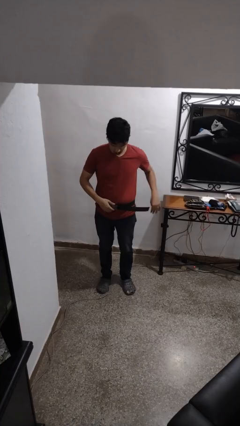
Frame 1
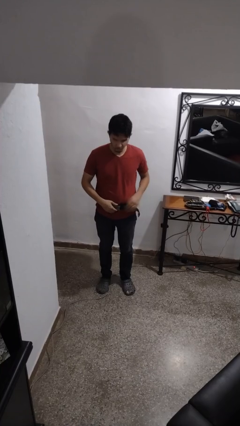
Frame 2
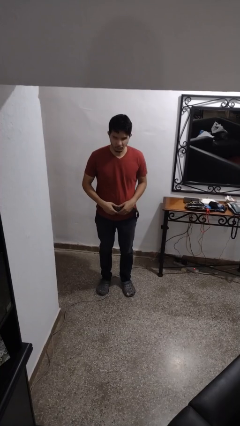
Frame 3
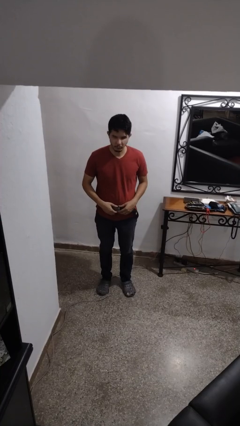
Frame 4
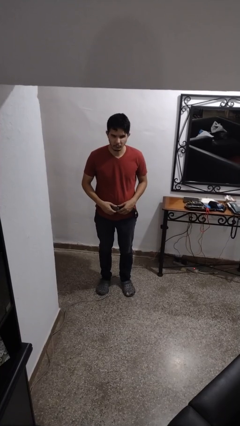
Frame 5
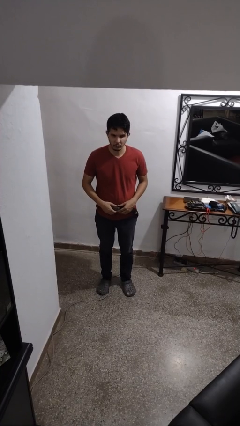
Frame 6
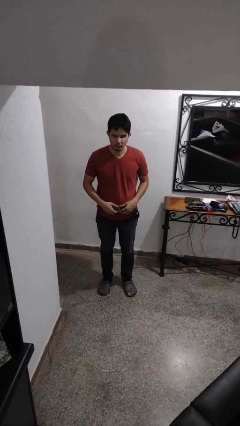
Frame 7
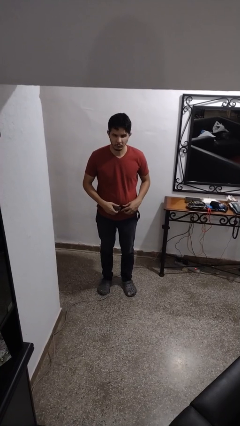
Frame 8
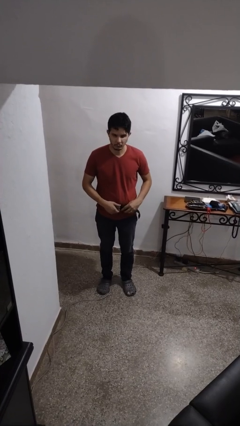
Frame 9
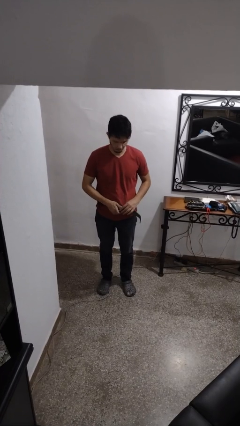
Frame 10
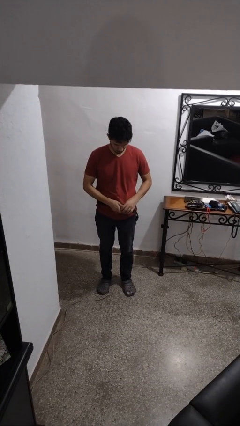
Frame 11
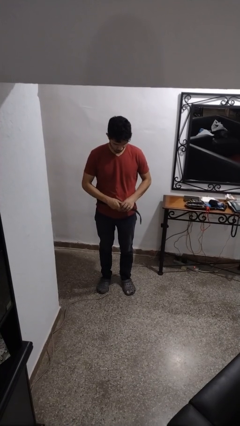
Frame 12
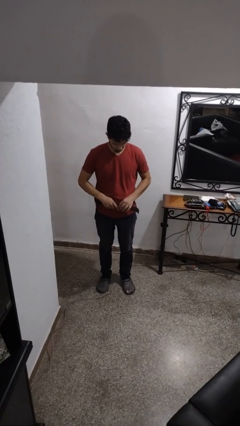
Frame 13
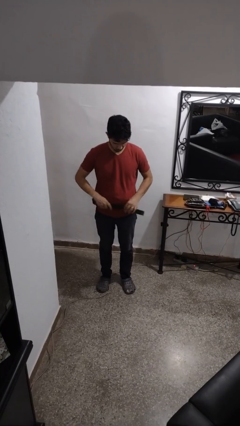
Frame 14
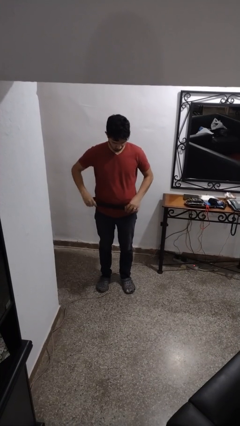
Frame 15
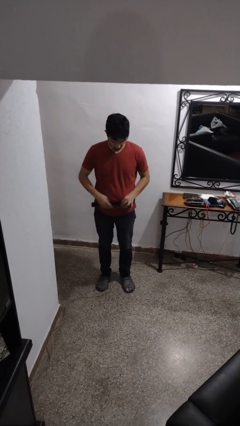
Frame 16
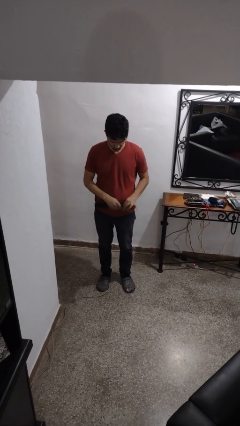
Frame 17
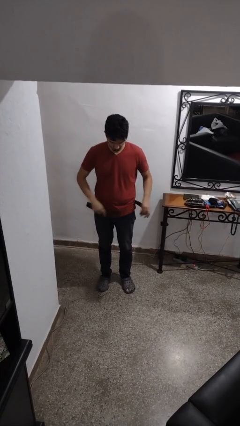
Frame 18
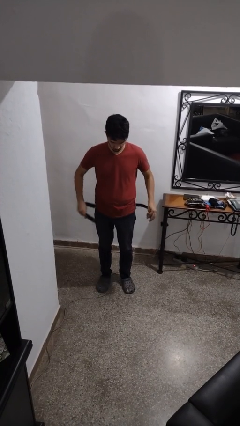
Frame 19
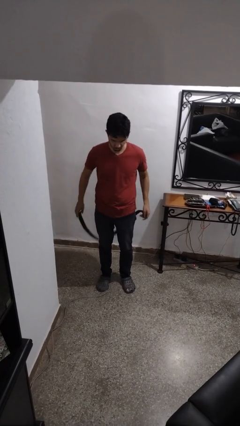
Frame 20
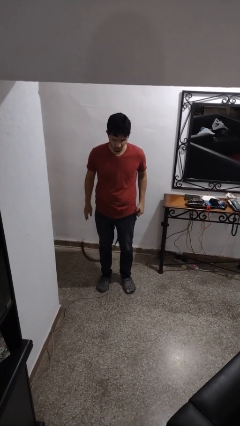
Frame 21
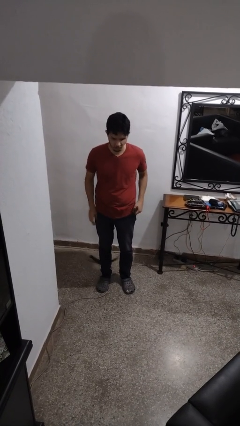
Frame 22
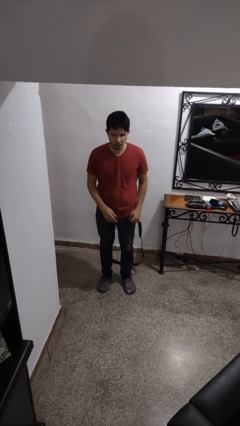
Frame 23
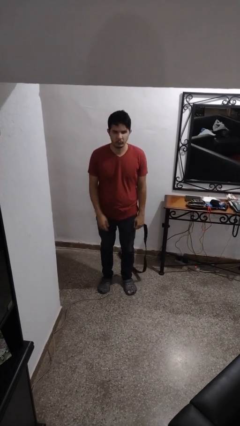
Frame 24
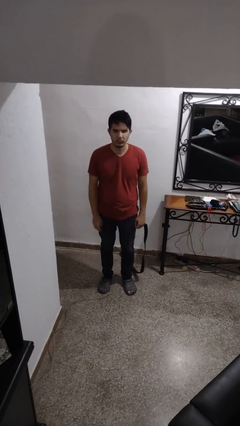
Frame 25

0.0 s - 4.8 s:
person takes off belt

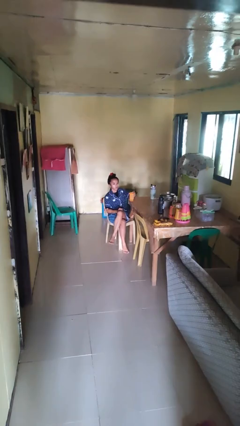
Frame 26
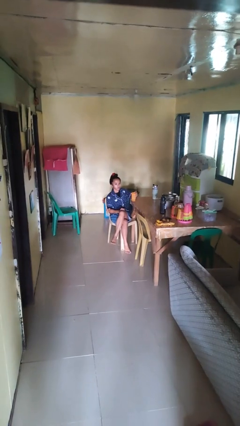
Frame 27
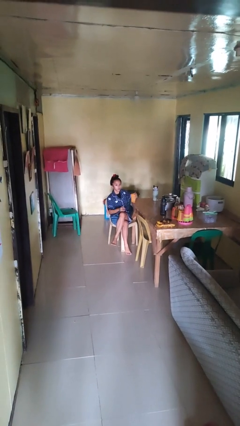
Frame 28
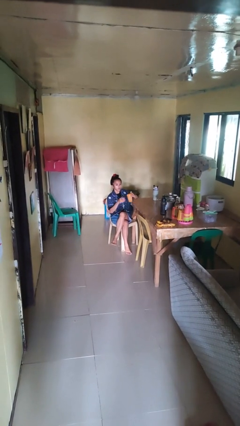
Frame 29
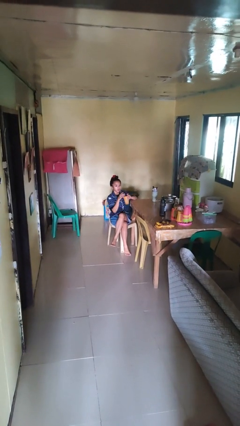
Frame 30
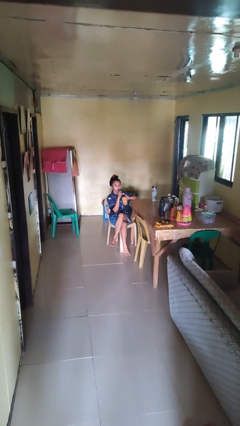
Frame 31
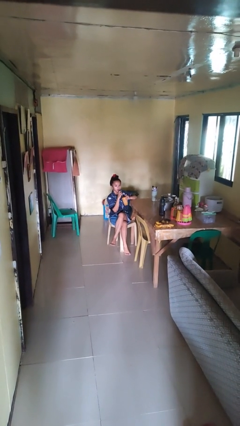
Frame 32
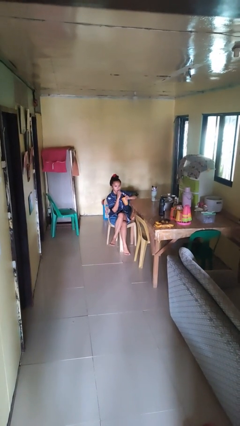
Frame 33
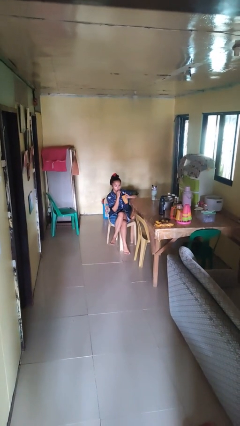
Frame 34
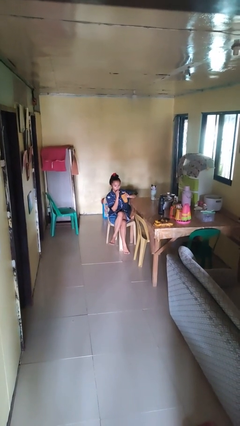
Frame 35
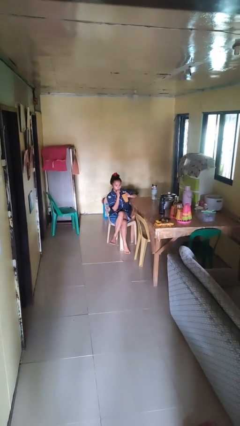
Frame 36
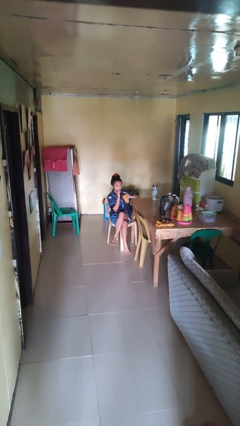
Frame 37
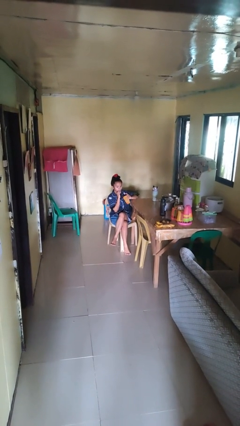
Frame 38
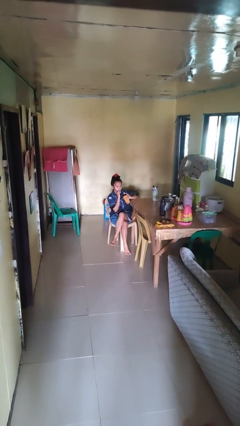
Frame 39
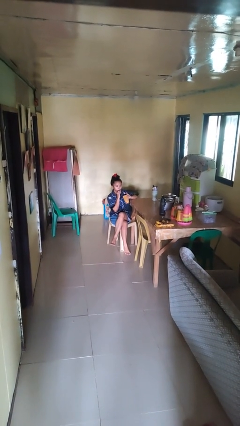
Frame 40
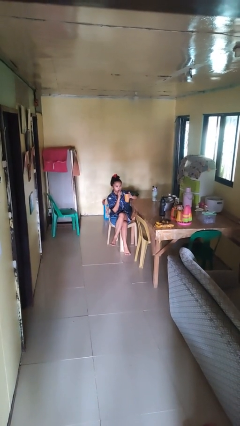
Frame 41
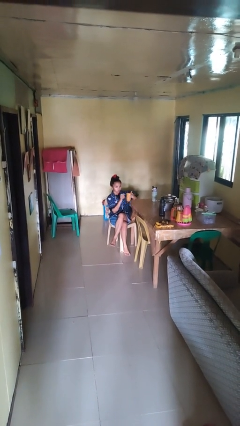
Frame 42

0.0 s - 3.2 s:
person drinks from straw

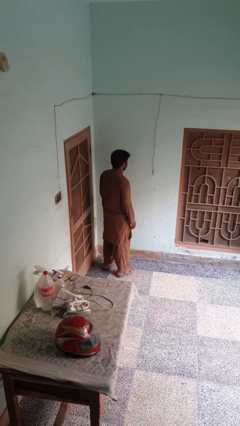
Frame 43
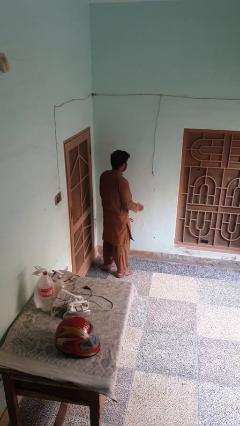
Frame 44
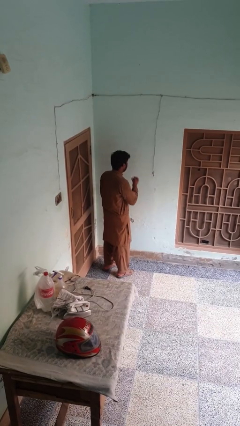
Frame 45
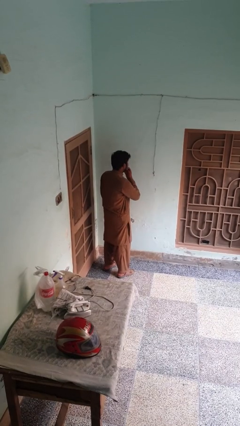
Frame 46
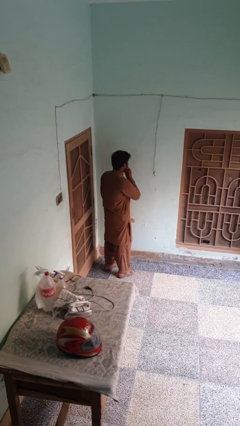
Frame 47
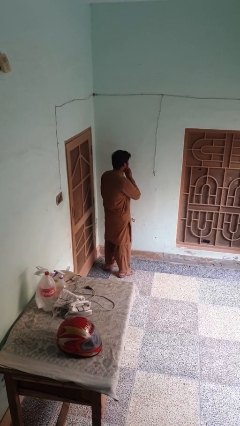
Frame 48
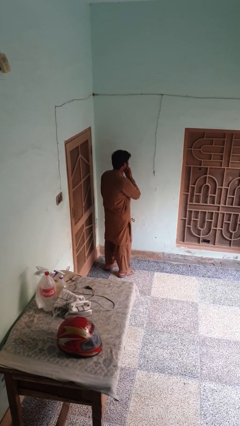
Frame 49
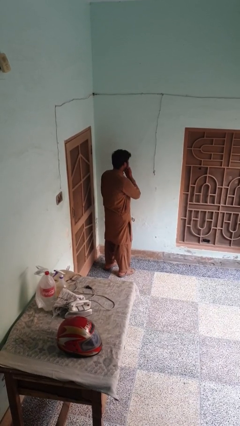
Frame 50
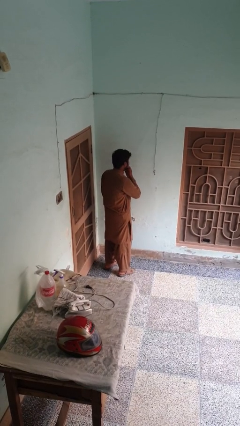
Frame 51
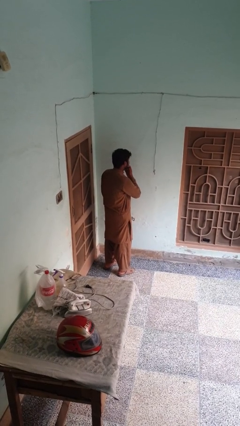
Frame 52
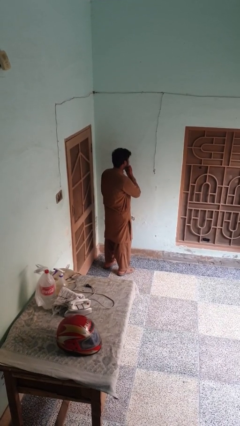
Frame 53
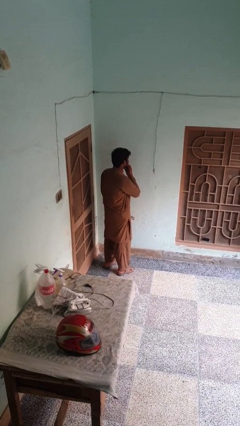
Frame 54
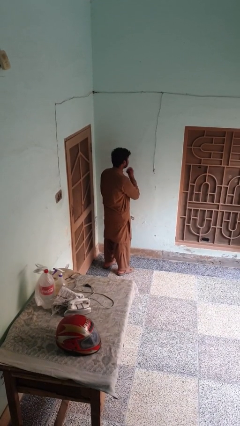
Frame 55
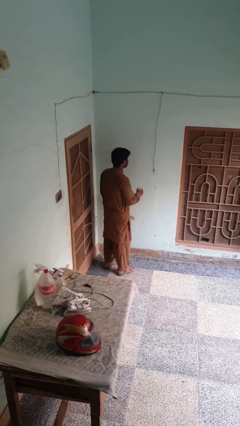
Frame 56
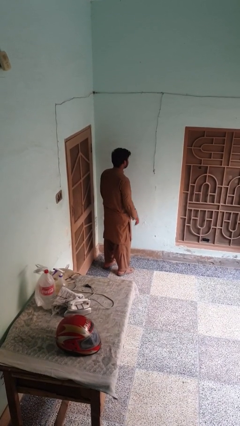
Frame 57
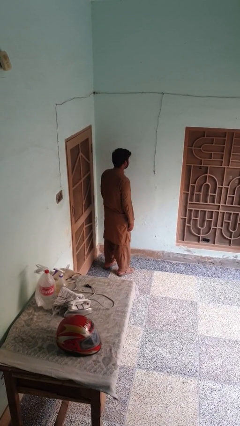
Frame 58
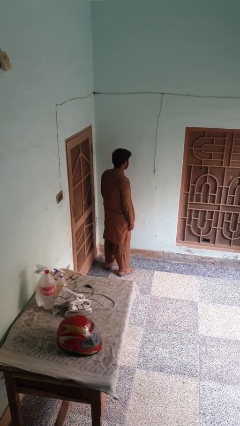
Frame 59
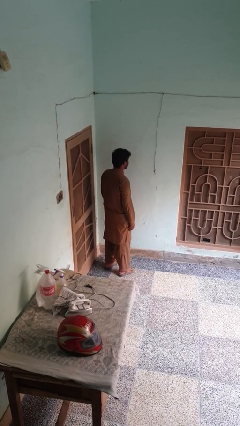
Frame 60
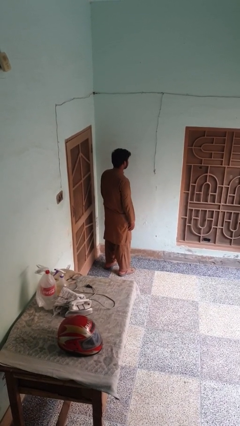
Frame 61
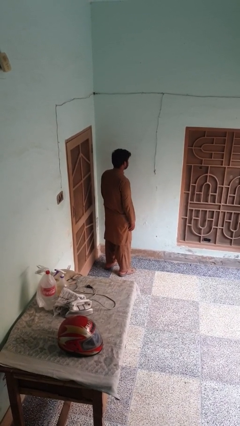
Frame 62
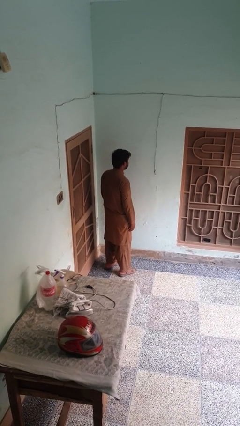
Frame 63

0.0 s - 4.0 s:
person strokes chin

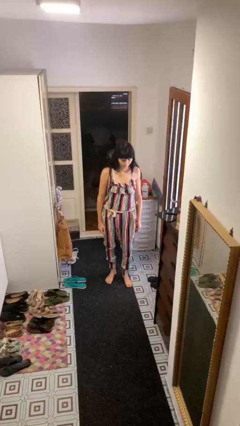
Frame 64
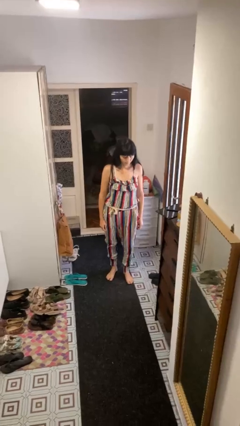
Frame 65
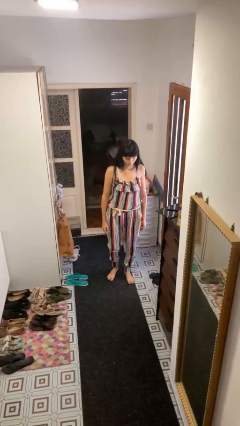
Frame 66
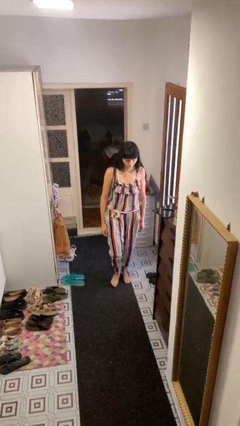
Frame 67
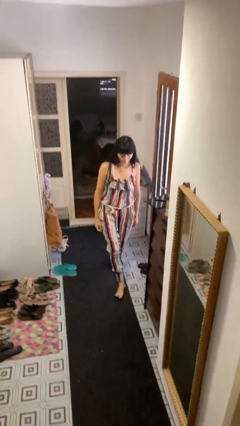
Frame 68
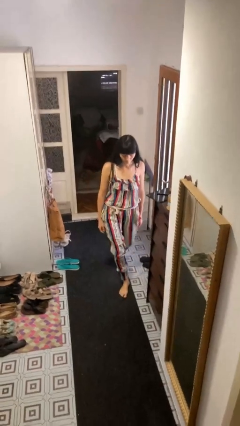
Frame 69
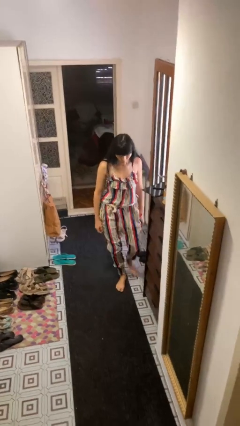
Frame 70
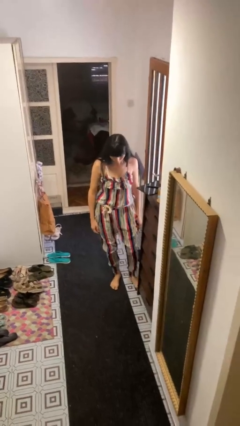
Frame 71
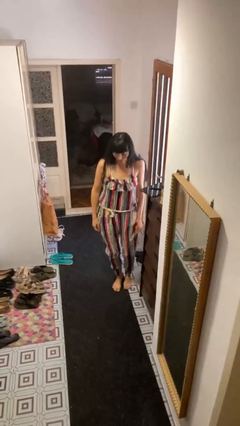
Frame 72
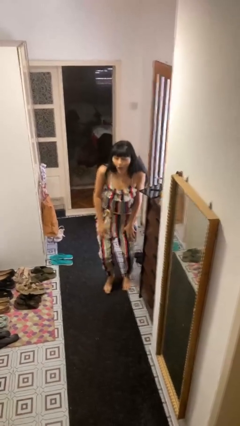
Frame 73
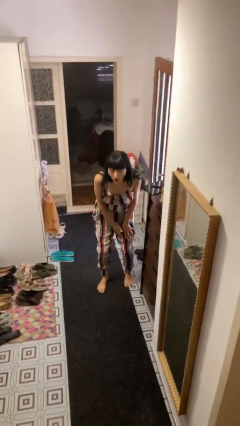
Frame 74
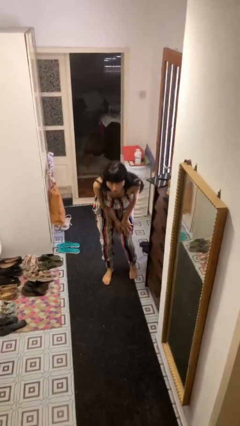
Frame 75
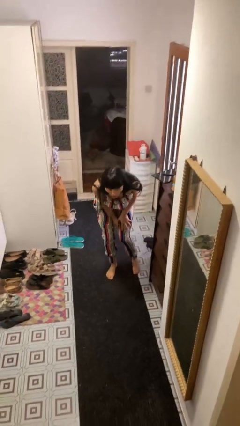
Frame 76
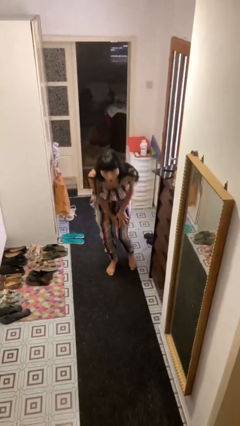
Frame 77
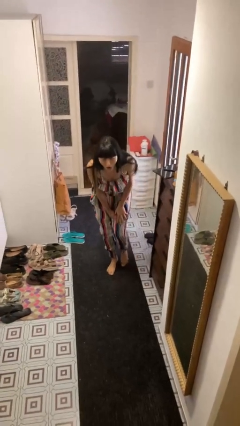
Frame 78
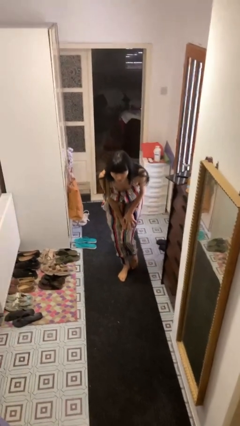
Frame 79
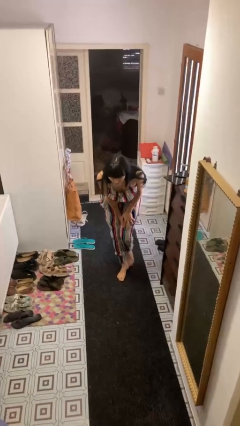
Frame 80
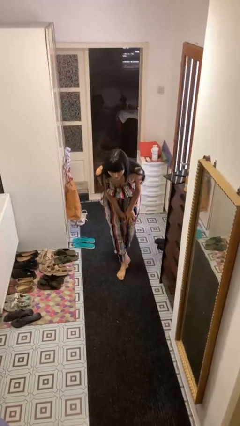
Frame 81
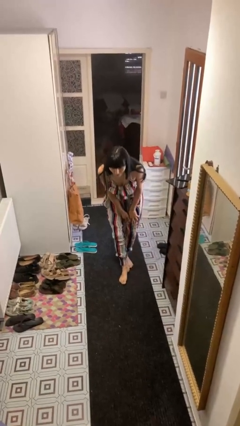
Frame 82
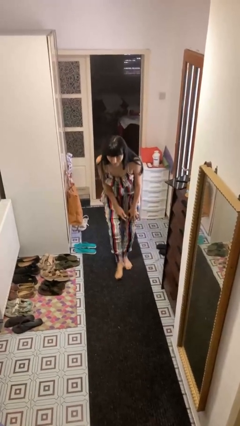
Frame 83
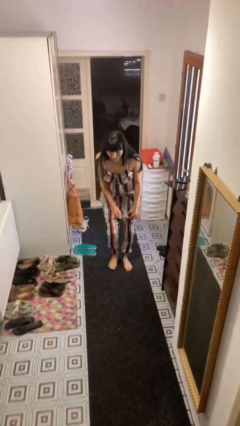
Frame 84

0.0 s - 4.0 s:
person stubs toe

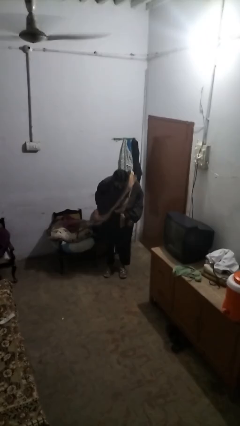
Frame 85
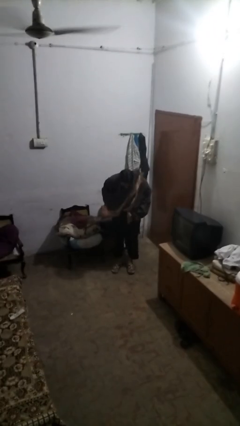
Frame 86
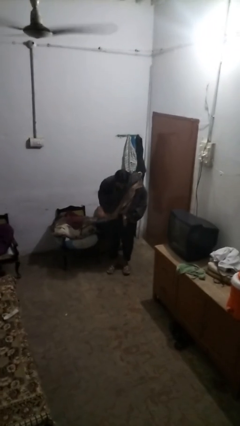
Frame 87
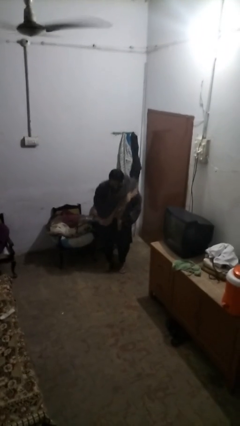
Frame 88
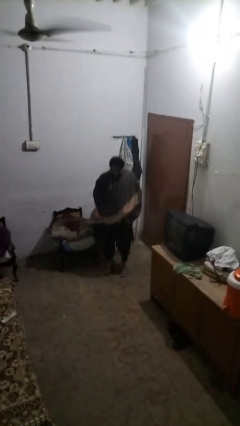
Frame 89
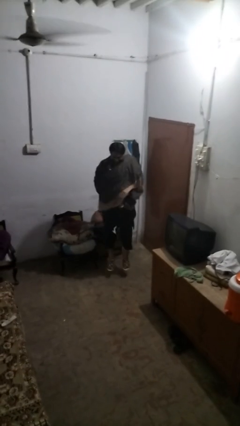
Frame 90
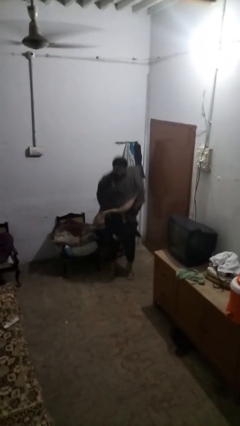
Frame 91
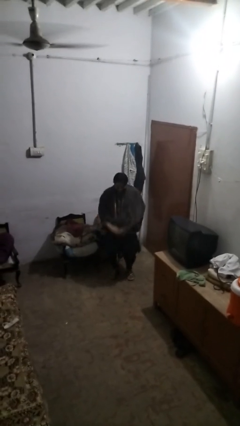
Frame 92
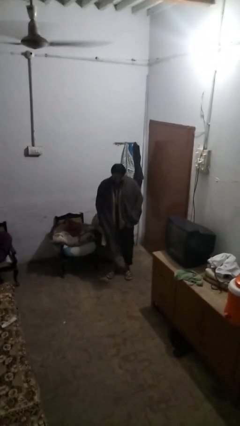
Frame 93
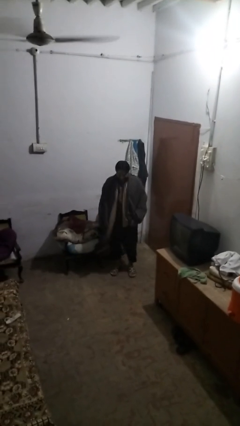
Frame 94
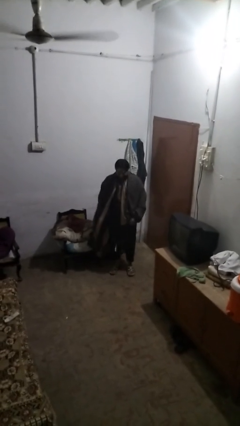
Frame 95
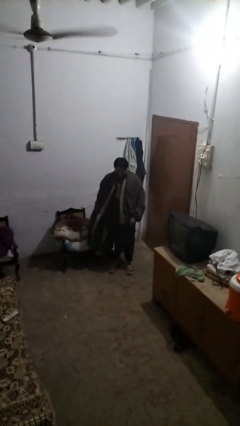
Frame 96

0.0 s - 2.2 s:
person jumps
